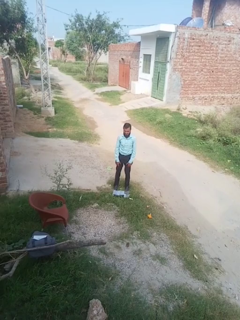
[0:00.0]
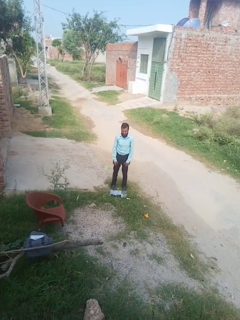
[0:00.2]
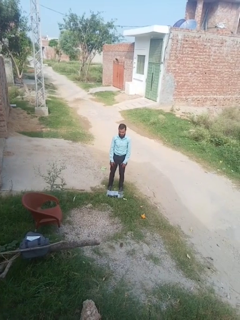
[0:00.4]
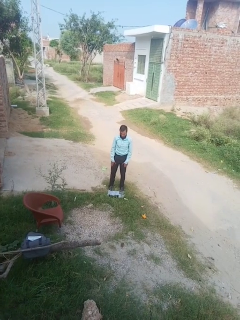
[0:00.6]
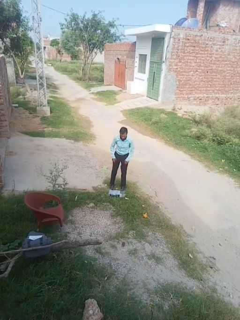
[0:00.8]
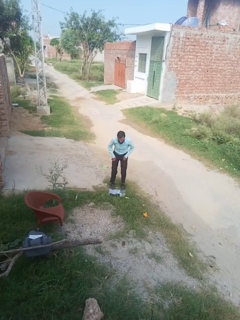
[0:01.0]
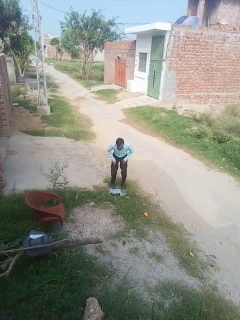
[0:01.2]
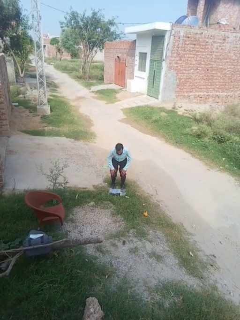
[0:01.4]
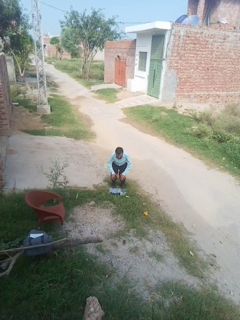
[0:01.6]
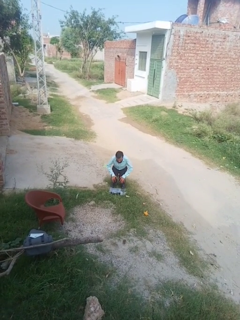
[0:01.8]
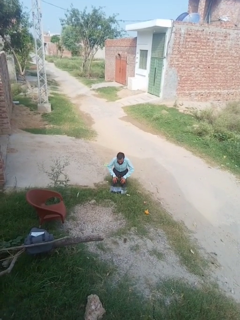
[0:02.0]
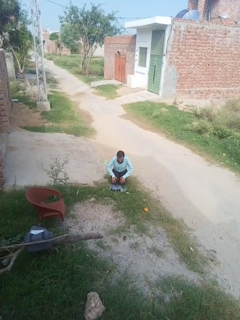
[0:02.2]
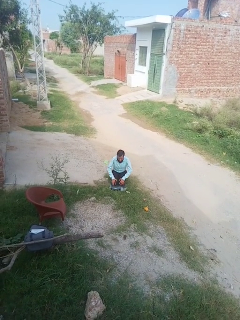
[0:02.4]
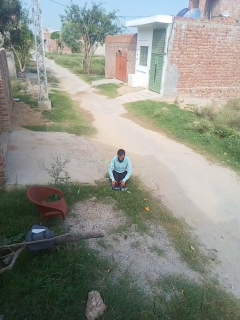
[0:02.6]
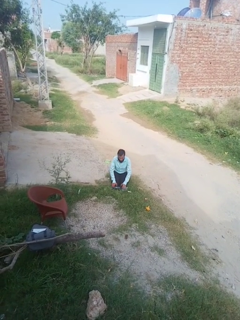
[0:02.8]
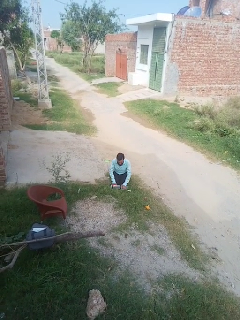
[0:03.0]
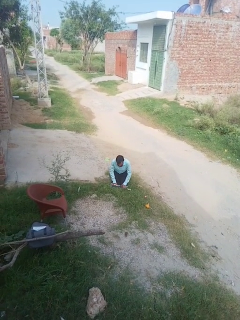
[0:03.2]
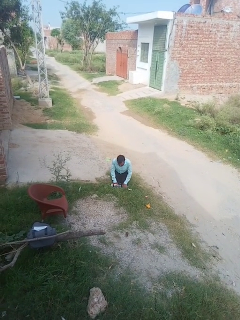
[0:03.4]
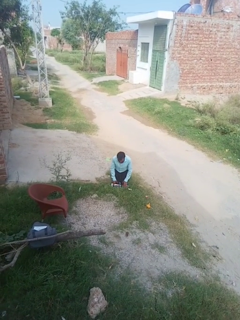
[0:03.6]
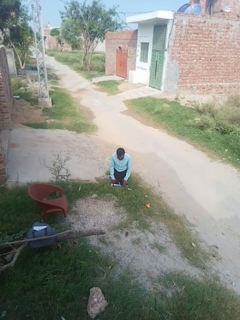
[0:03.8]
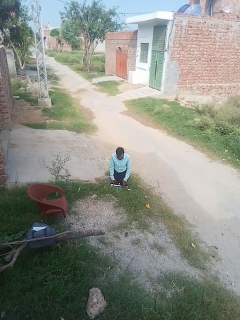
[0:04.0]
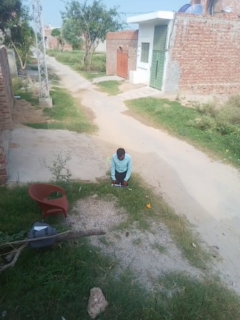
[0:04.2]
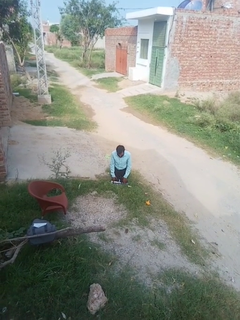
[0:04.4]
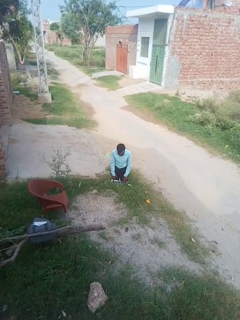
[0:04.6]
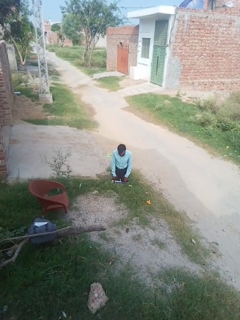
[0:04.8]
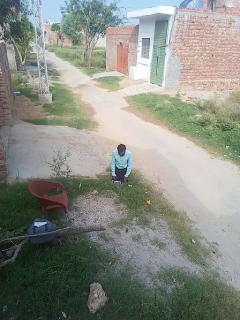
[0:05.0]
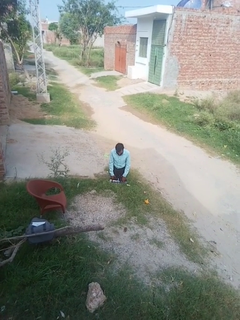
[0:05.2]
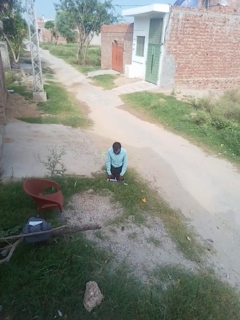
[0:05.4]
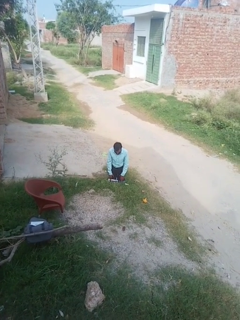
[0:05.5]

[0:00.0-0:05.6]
person kneels

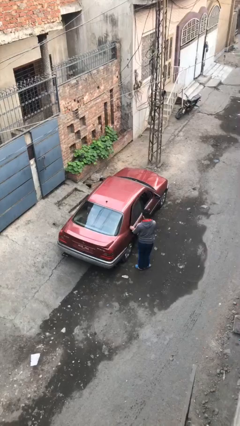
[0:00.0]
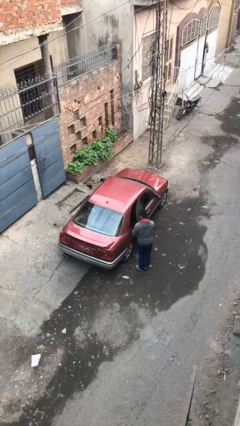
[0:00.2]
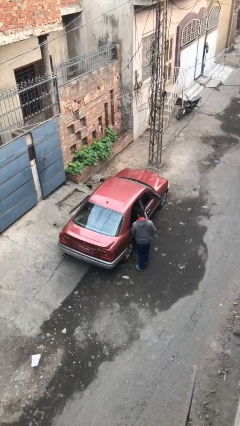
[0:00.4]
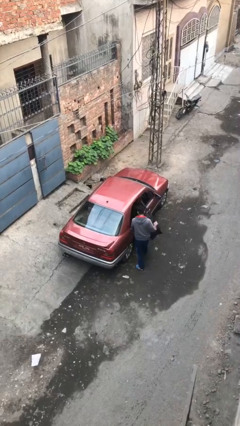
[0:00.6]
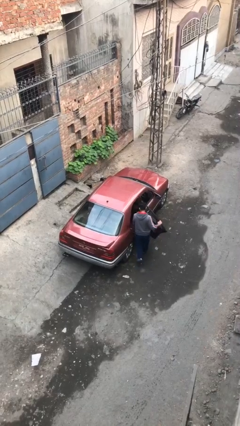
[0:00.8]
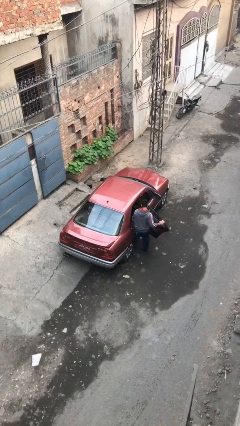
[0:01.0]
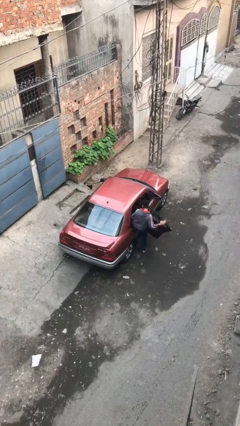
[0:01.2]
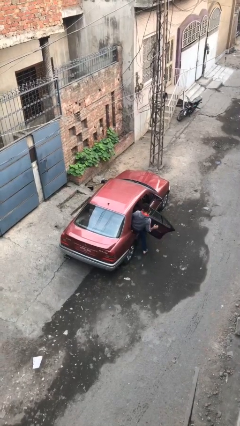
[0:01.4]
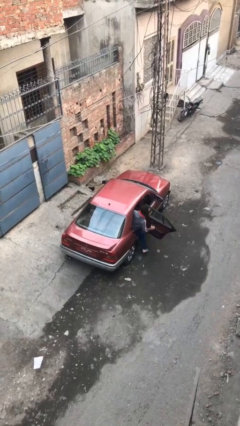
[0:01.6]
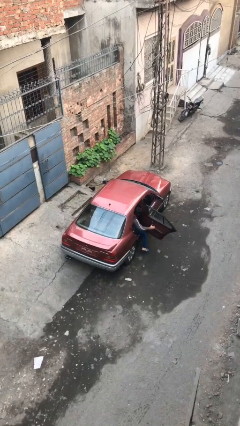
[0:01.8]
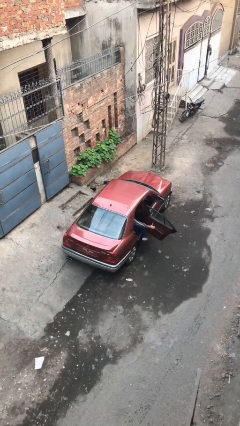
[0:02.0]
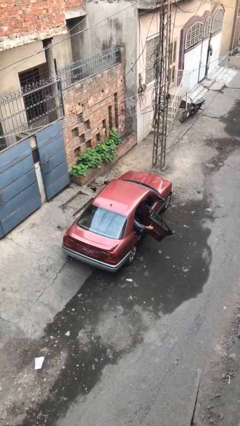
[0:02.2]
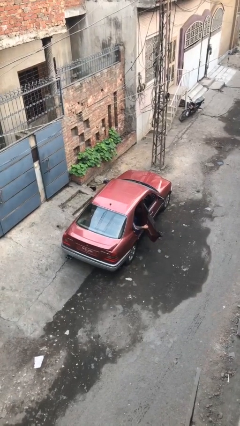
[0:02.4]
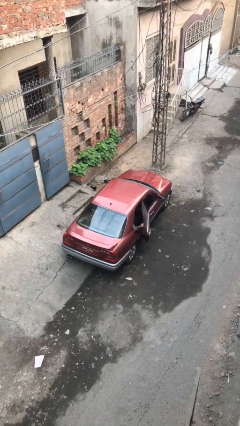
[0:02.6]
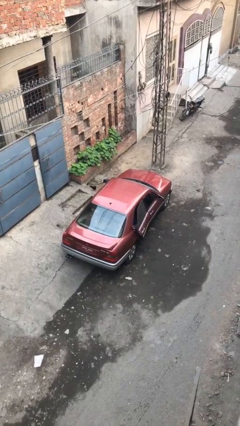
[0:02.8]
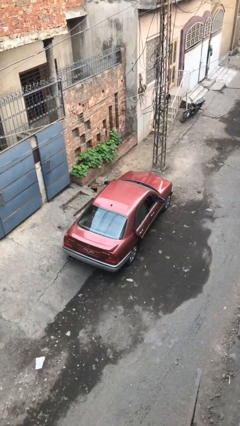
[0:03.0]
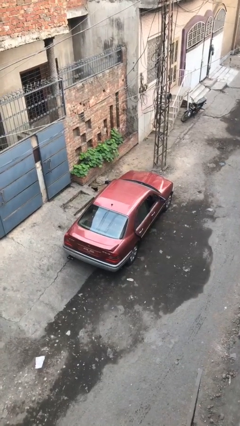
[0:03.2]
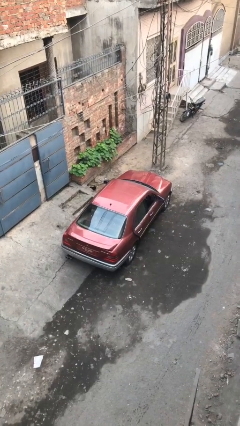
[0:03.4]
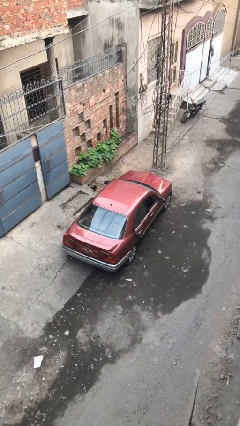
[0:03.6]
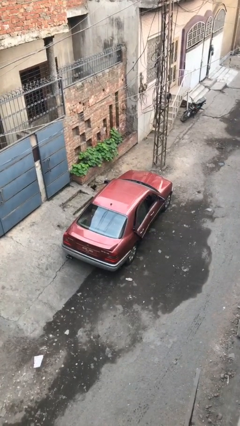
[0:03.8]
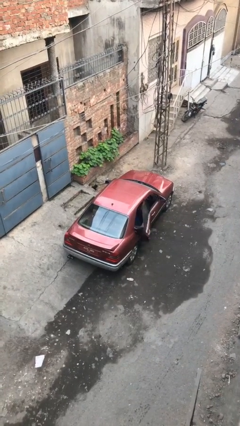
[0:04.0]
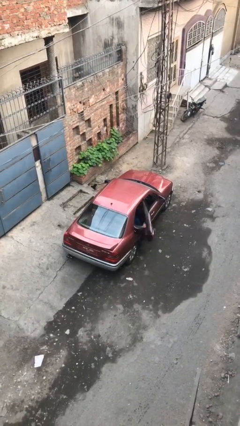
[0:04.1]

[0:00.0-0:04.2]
car picks up person

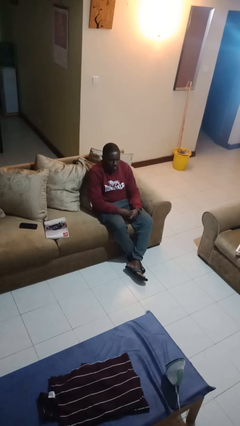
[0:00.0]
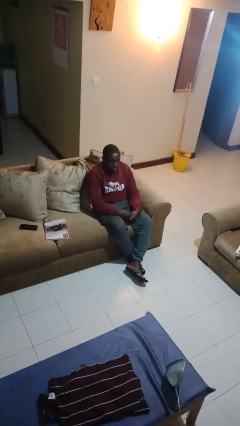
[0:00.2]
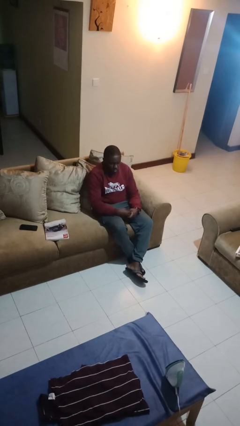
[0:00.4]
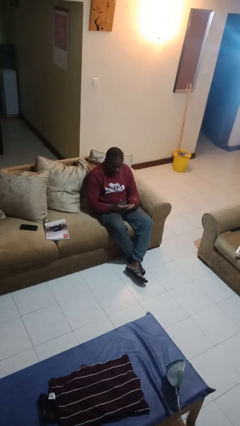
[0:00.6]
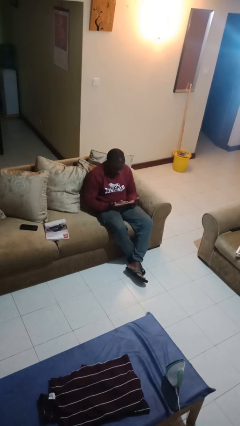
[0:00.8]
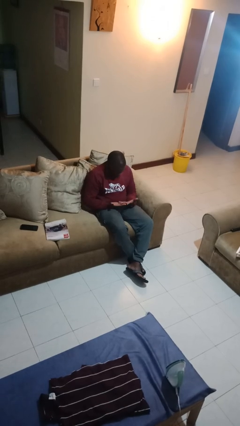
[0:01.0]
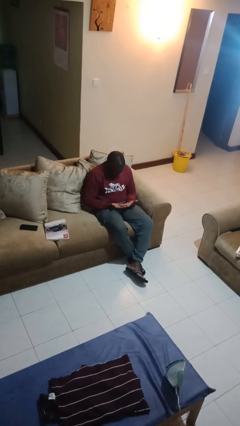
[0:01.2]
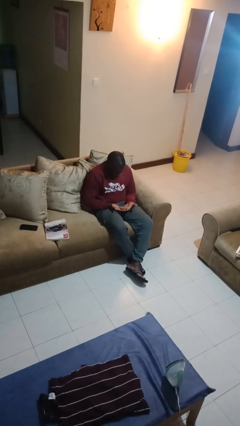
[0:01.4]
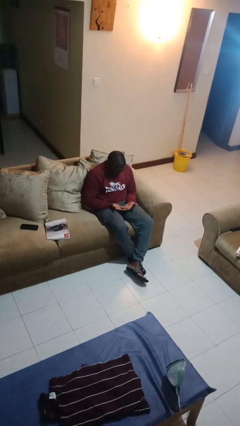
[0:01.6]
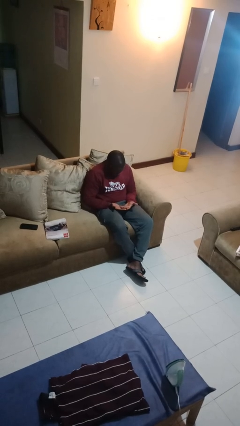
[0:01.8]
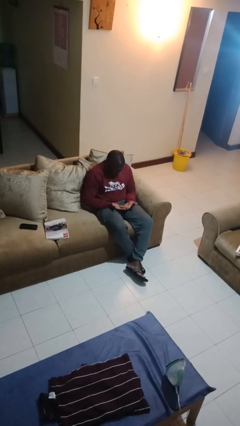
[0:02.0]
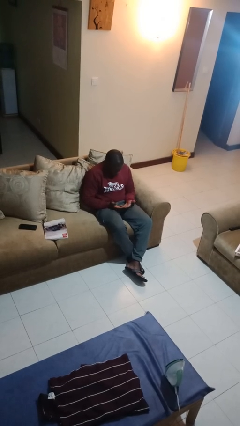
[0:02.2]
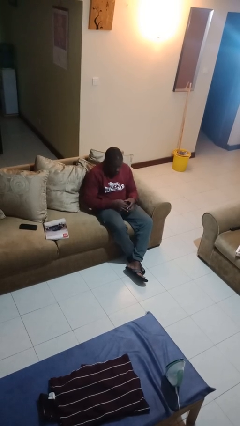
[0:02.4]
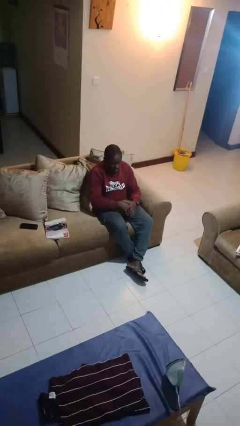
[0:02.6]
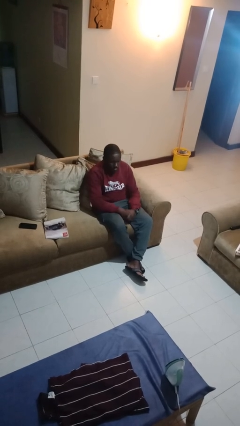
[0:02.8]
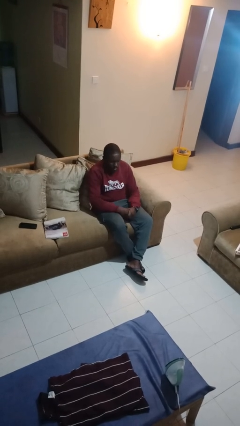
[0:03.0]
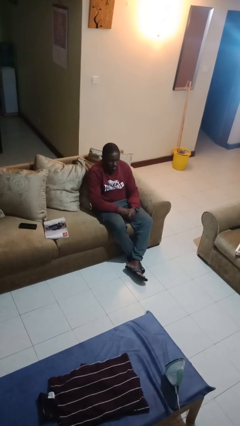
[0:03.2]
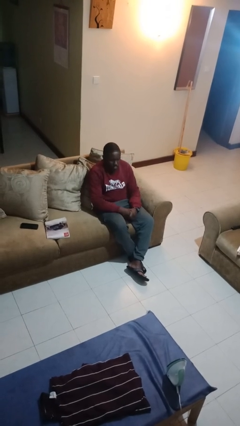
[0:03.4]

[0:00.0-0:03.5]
person looks at hands in lap

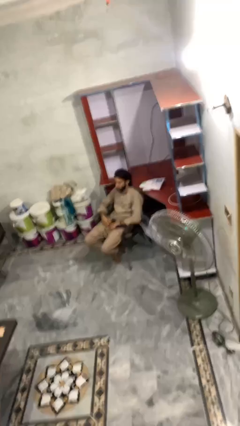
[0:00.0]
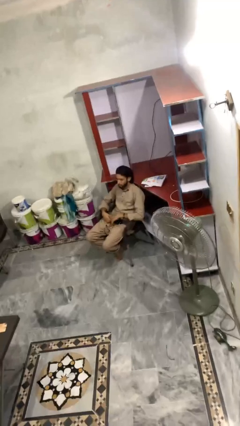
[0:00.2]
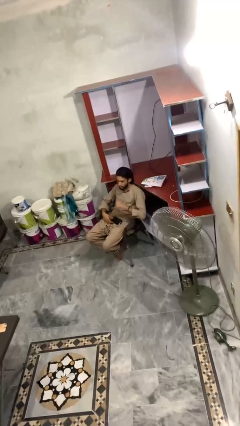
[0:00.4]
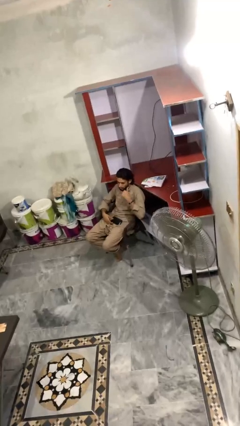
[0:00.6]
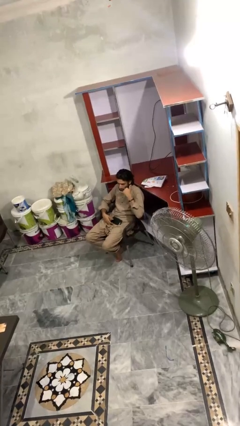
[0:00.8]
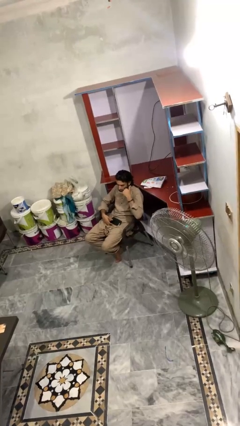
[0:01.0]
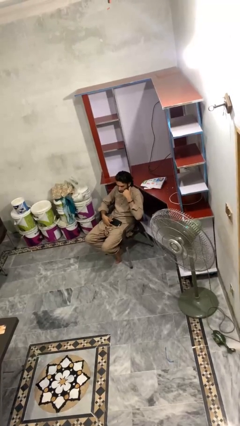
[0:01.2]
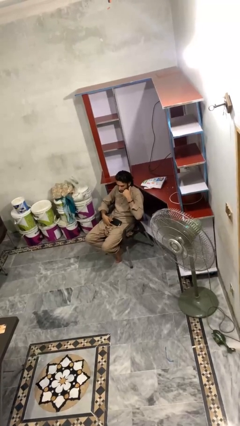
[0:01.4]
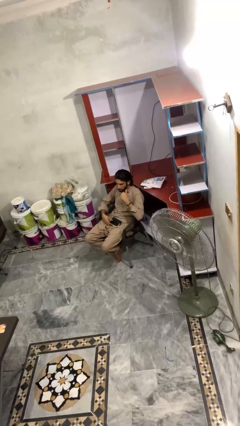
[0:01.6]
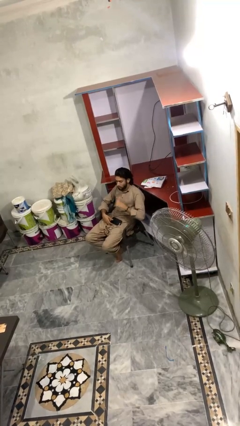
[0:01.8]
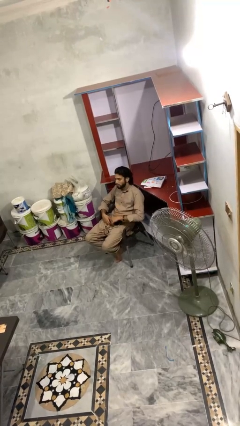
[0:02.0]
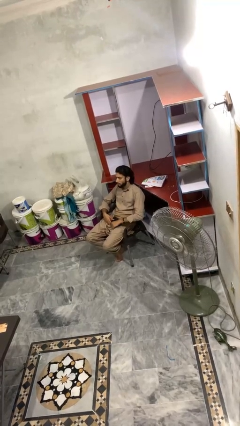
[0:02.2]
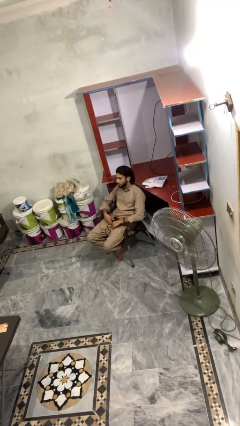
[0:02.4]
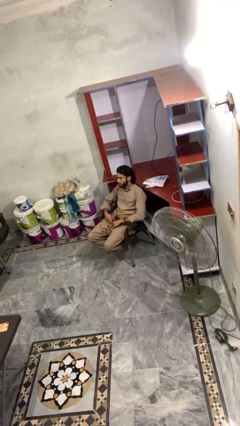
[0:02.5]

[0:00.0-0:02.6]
person gestures call me

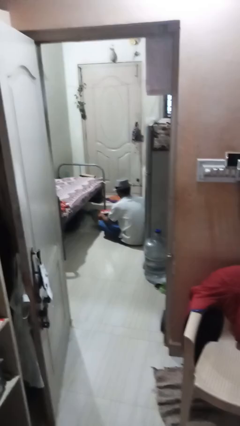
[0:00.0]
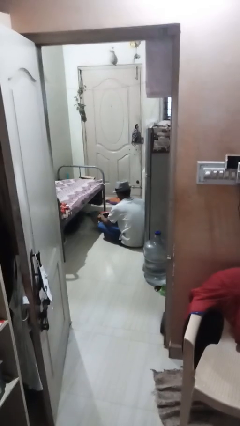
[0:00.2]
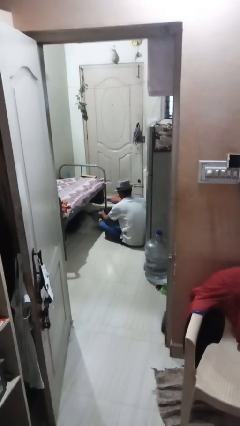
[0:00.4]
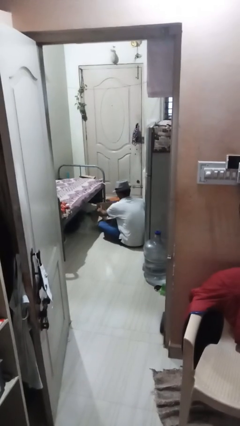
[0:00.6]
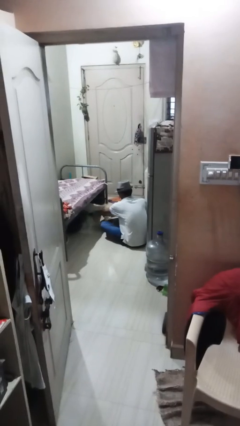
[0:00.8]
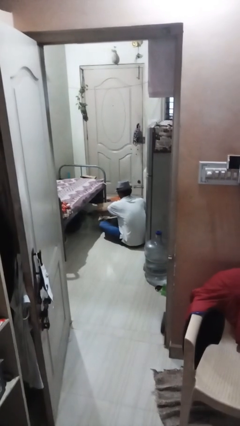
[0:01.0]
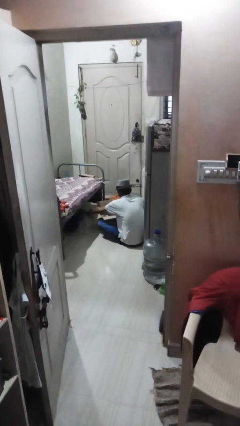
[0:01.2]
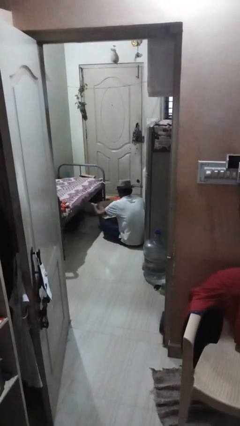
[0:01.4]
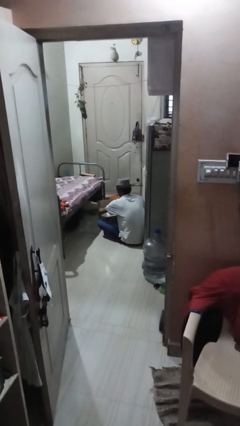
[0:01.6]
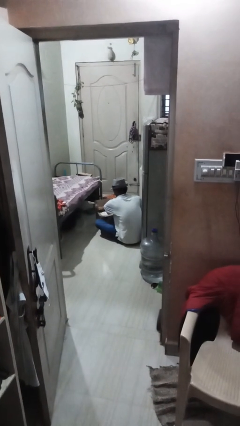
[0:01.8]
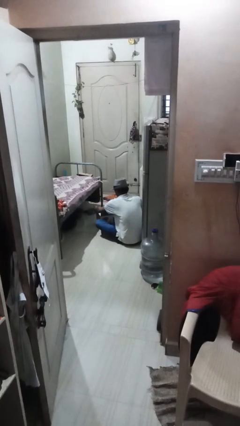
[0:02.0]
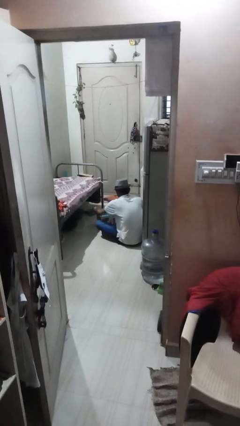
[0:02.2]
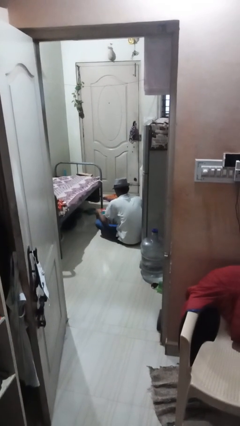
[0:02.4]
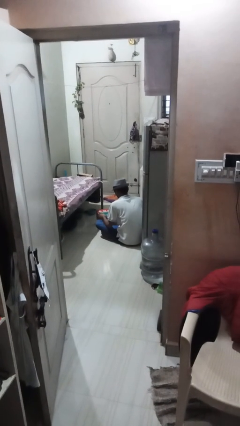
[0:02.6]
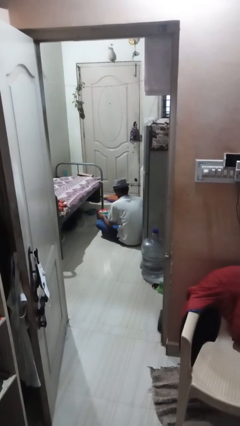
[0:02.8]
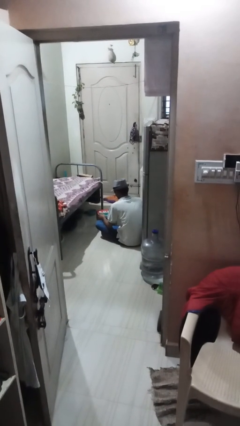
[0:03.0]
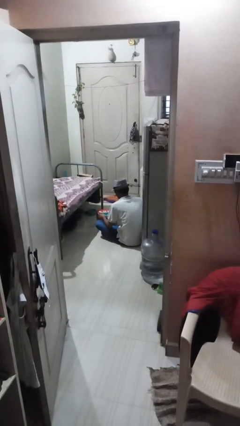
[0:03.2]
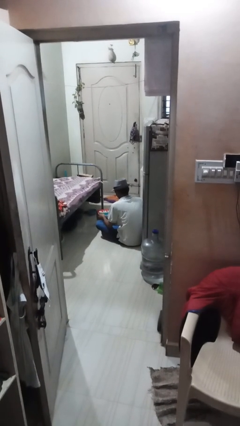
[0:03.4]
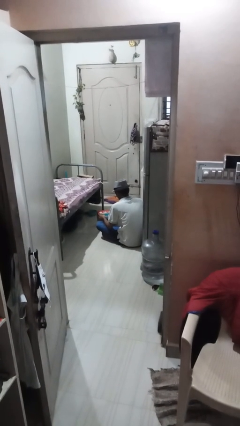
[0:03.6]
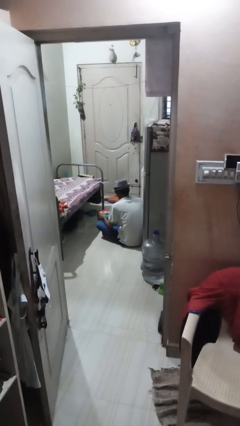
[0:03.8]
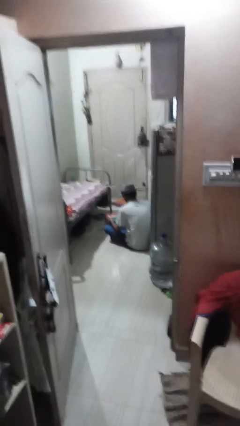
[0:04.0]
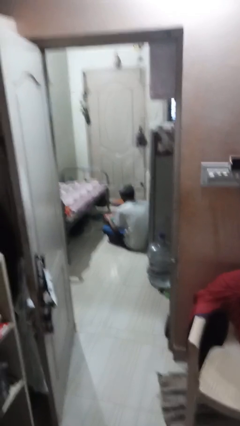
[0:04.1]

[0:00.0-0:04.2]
person closes box
